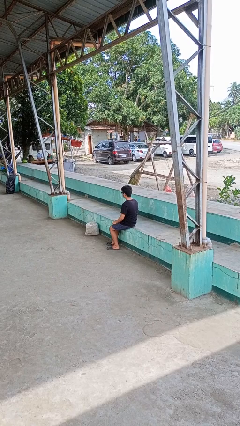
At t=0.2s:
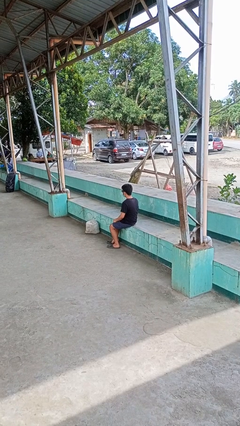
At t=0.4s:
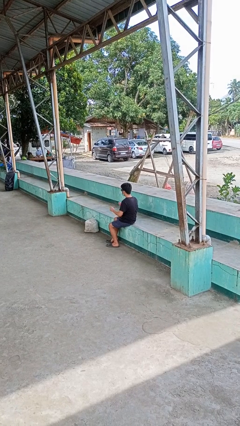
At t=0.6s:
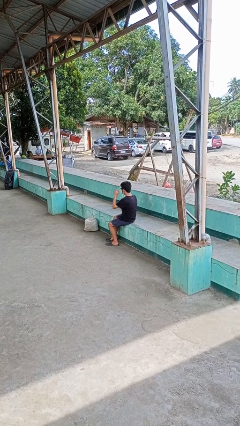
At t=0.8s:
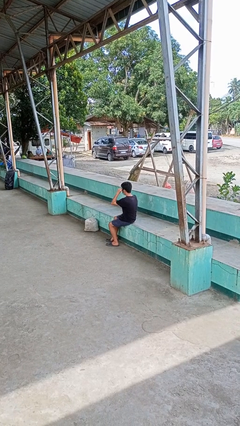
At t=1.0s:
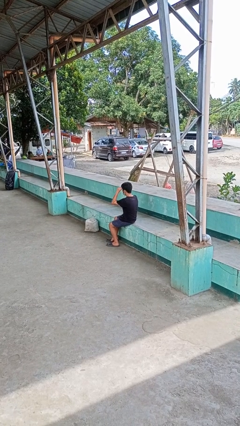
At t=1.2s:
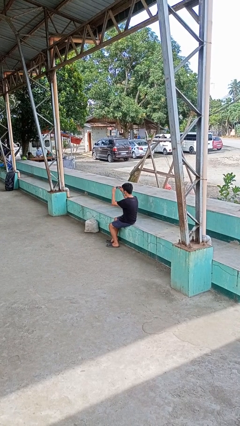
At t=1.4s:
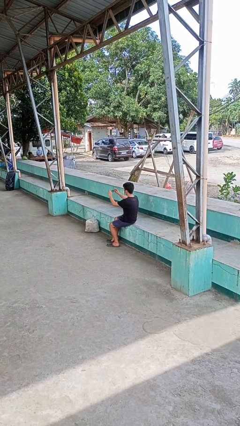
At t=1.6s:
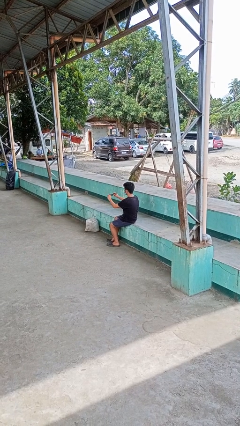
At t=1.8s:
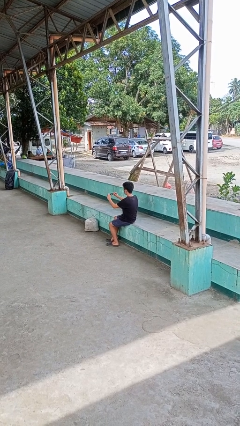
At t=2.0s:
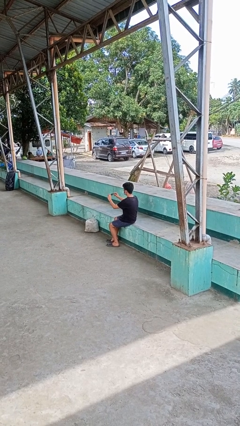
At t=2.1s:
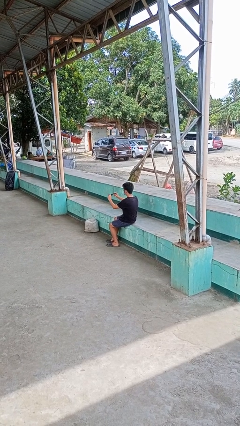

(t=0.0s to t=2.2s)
person takes off sunglasses

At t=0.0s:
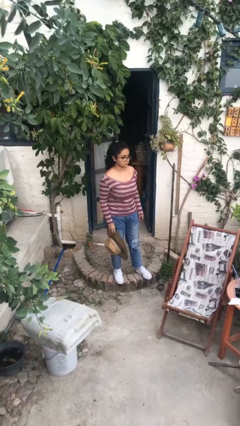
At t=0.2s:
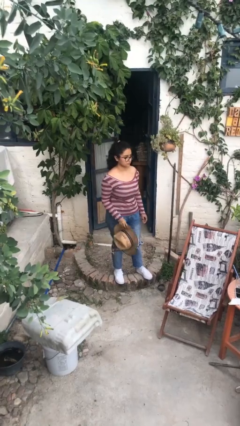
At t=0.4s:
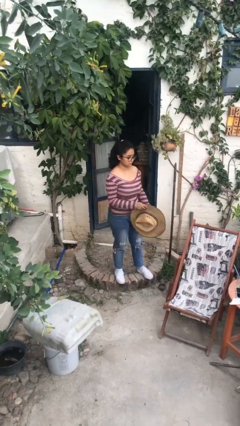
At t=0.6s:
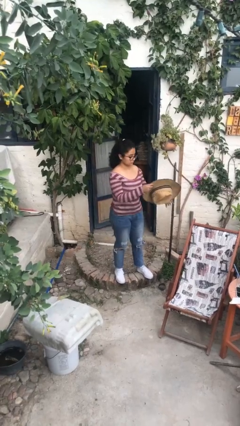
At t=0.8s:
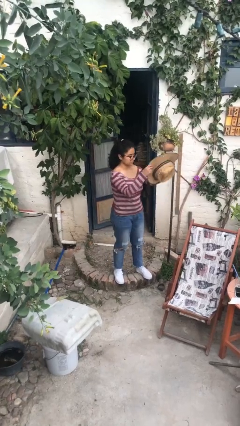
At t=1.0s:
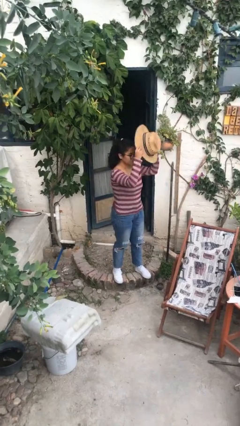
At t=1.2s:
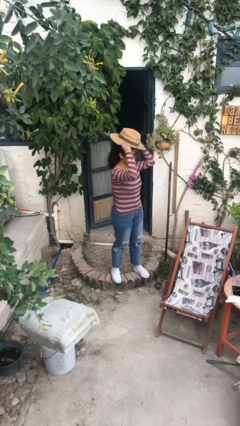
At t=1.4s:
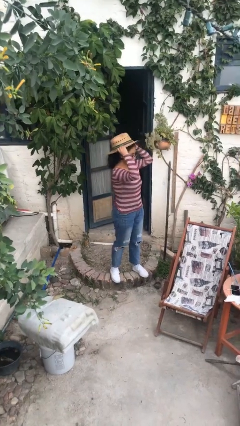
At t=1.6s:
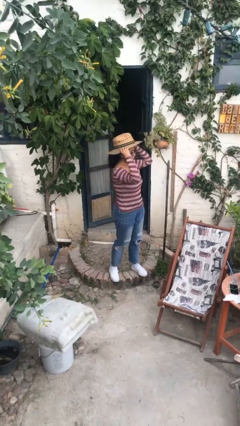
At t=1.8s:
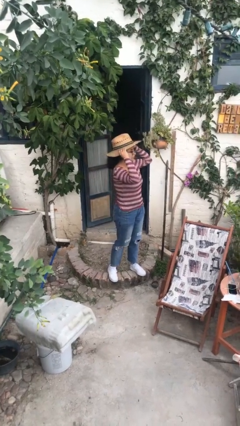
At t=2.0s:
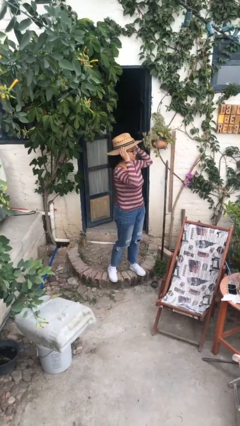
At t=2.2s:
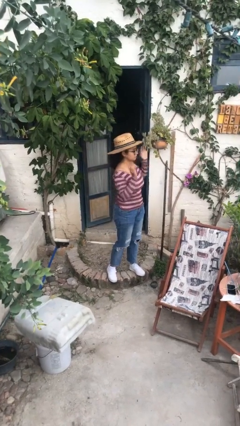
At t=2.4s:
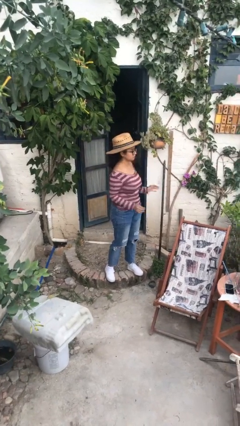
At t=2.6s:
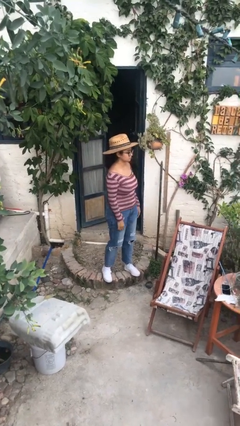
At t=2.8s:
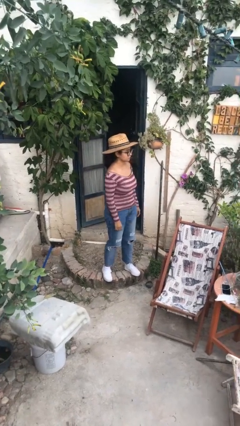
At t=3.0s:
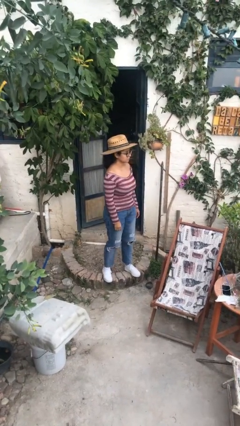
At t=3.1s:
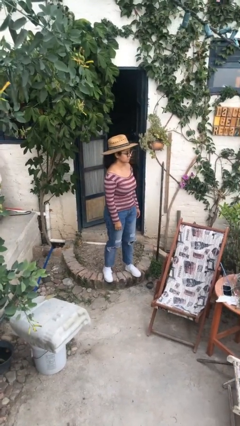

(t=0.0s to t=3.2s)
person puts on hat

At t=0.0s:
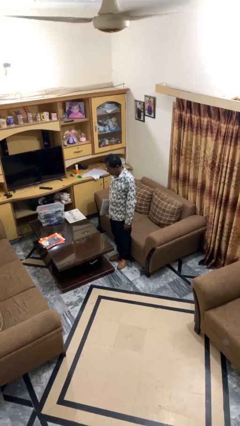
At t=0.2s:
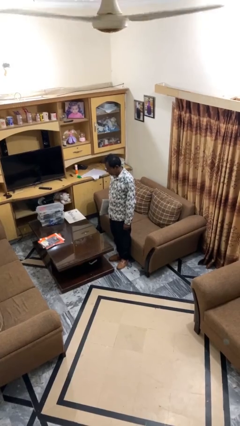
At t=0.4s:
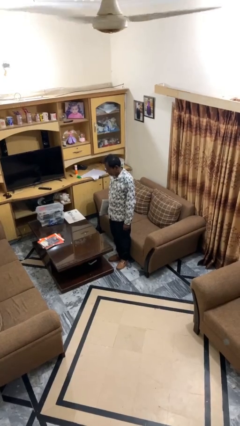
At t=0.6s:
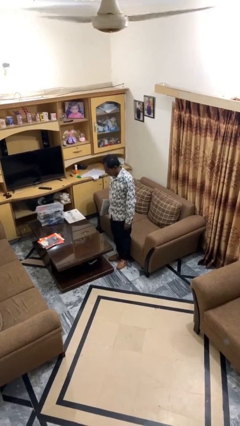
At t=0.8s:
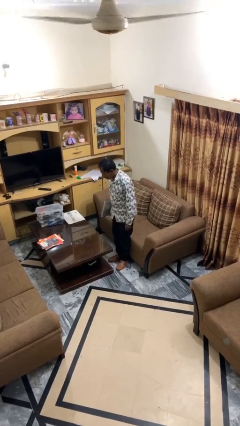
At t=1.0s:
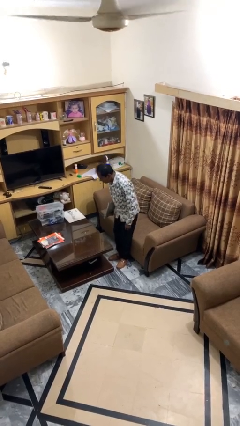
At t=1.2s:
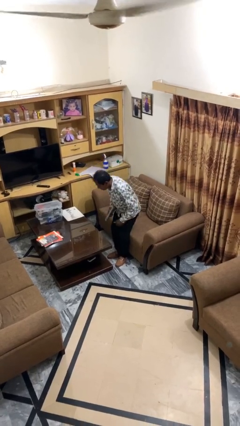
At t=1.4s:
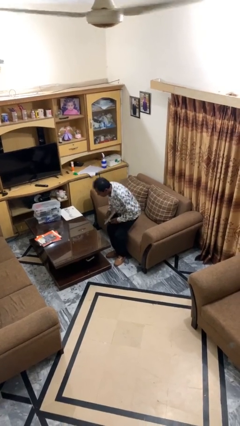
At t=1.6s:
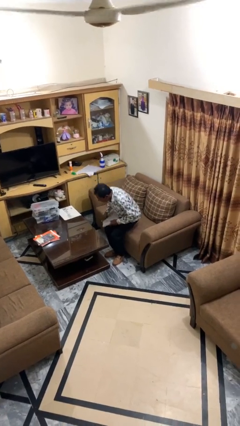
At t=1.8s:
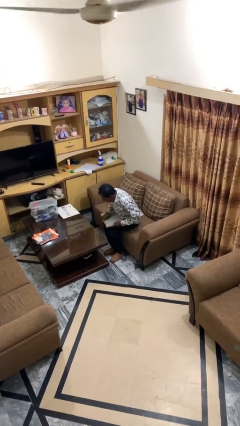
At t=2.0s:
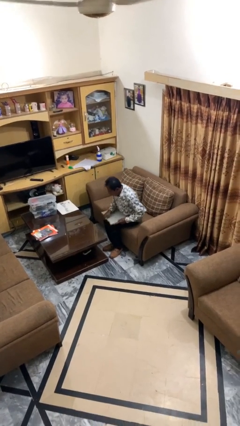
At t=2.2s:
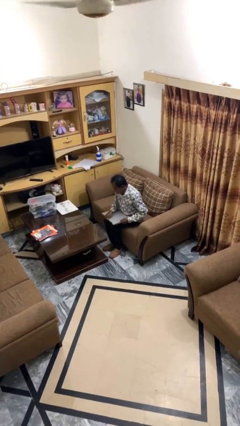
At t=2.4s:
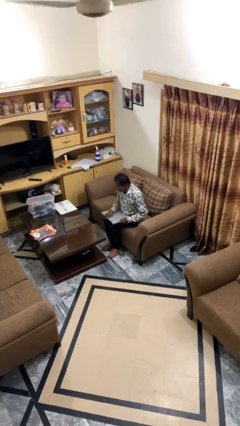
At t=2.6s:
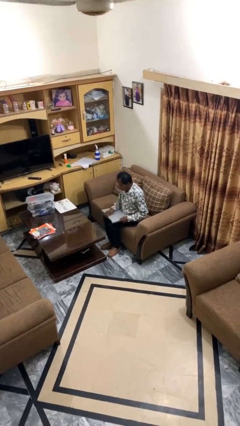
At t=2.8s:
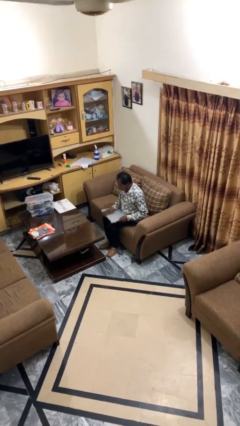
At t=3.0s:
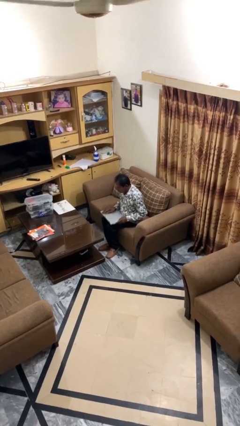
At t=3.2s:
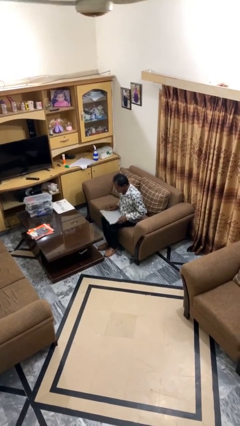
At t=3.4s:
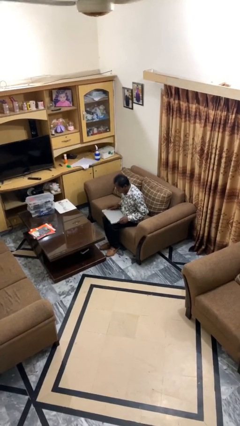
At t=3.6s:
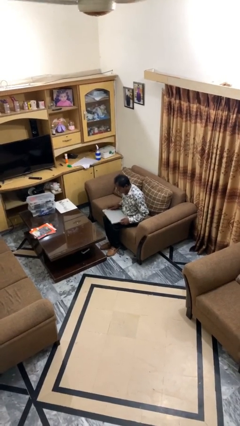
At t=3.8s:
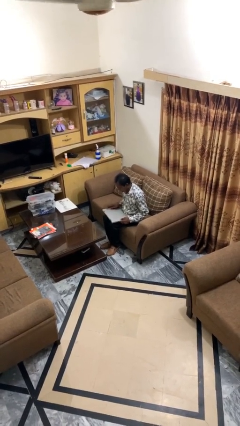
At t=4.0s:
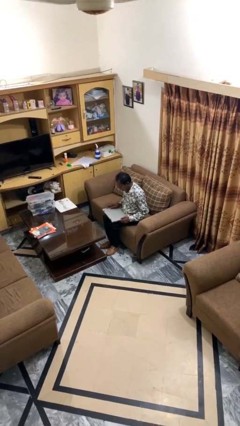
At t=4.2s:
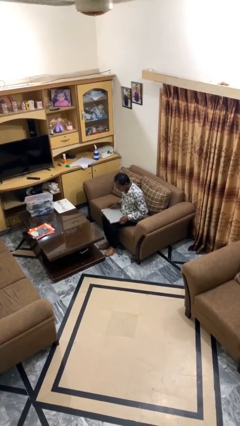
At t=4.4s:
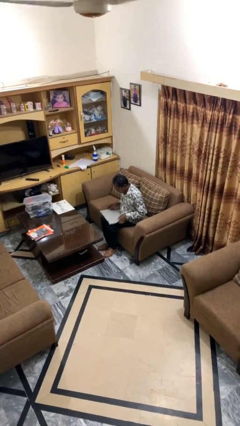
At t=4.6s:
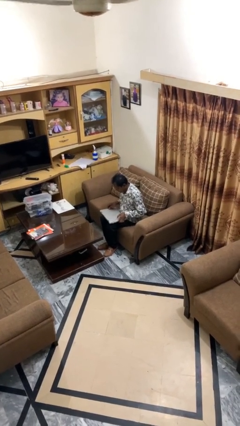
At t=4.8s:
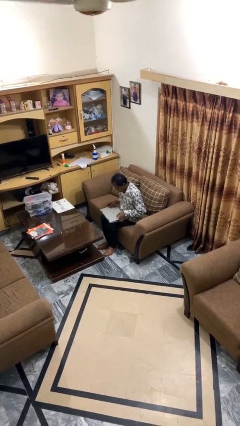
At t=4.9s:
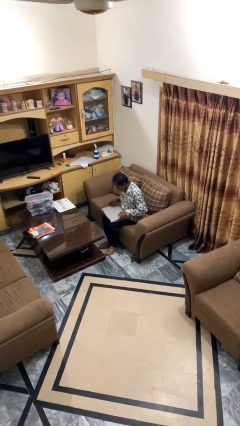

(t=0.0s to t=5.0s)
person sits down

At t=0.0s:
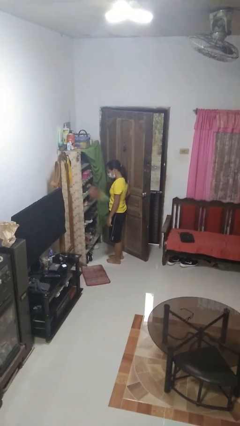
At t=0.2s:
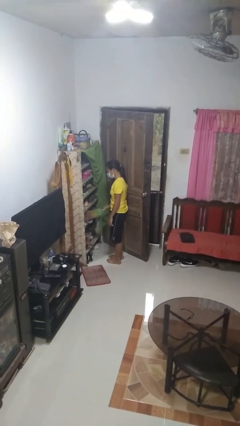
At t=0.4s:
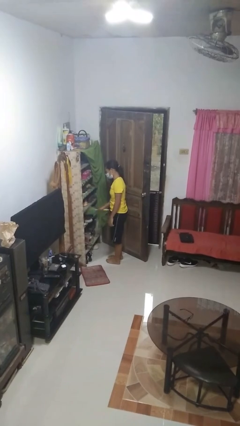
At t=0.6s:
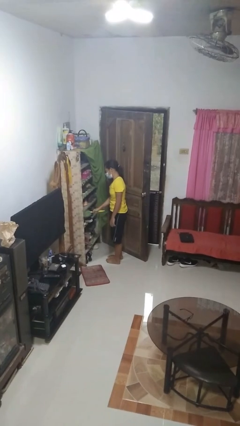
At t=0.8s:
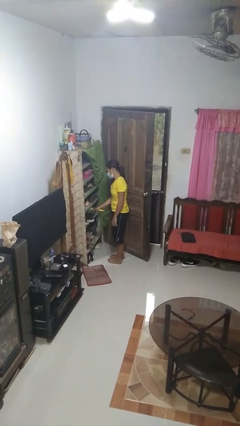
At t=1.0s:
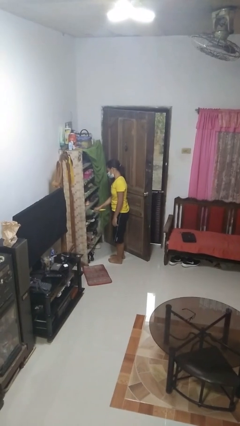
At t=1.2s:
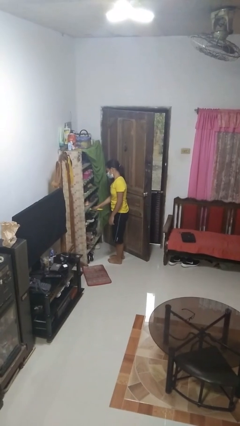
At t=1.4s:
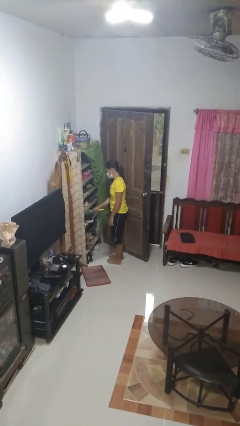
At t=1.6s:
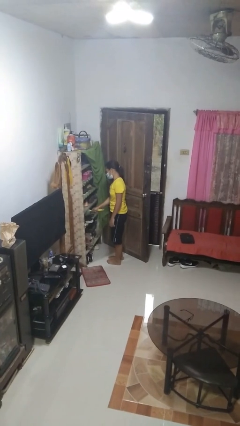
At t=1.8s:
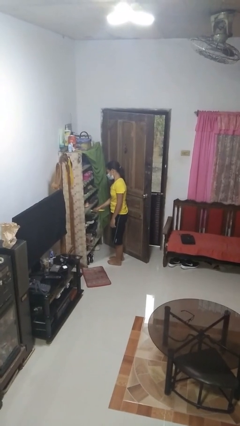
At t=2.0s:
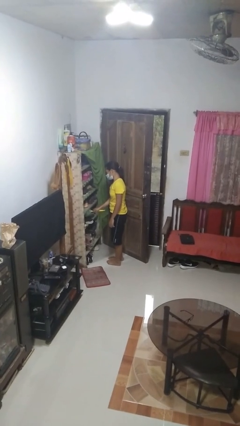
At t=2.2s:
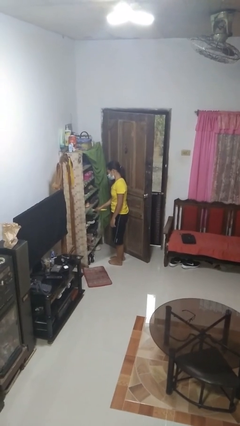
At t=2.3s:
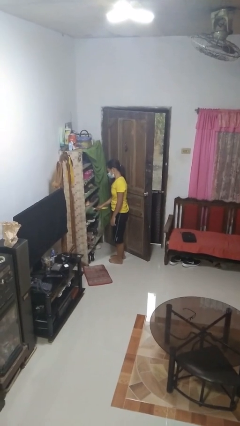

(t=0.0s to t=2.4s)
person dusts furniture

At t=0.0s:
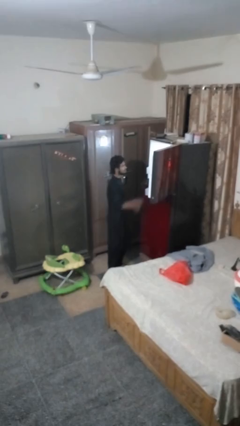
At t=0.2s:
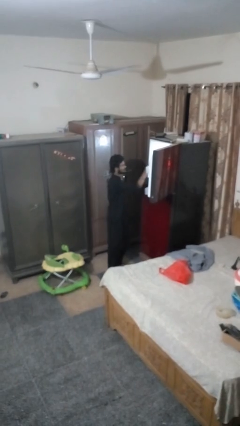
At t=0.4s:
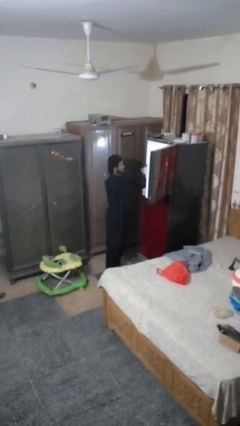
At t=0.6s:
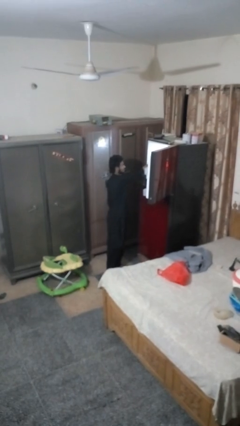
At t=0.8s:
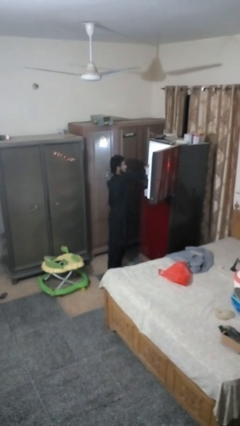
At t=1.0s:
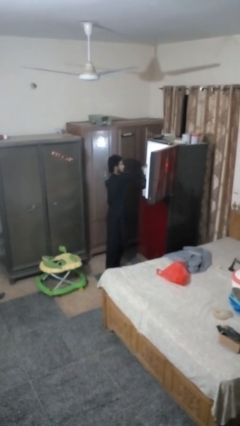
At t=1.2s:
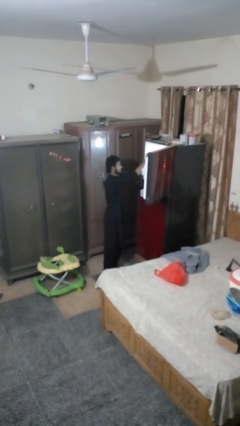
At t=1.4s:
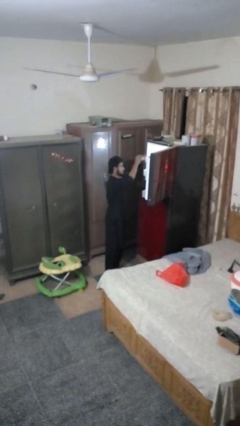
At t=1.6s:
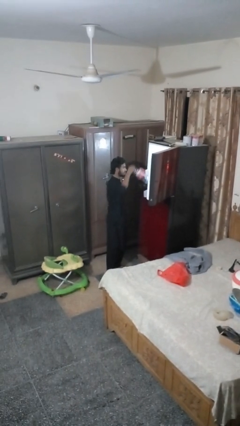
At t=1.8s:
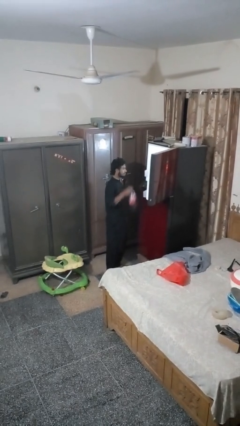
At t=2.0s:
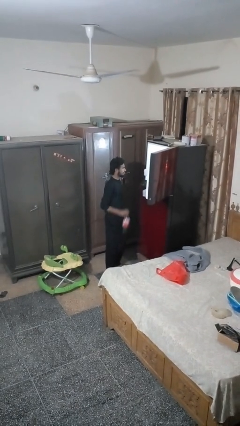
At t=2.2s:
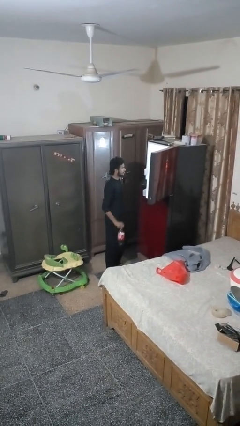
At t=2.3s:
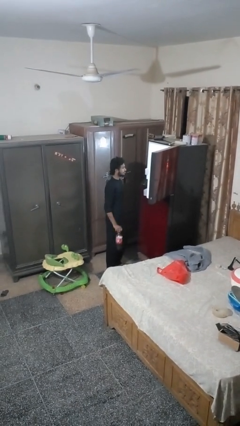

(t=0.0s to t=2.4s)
person takes object from refrigerator

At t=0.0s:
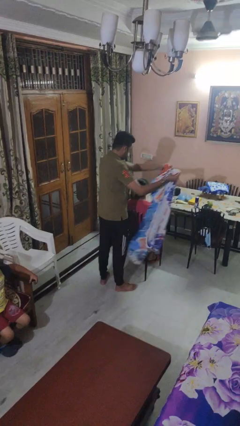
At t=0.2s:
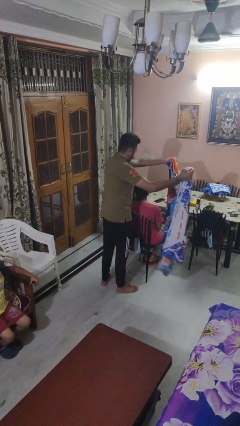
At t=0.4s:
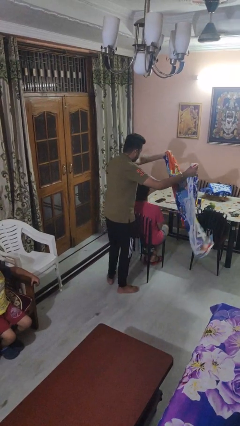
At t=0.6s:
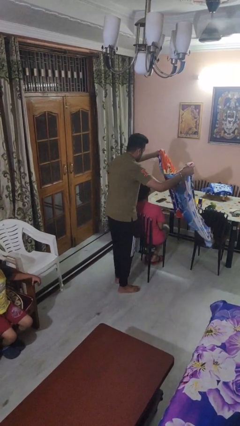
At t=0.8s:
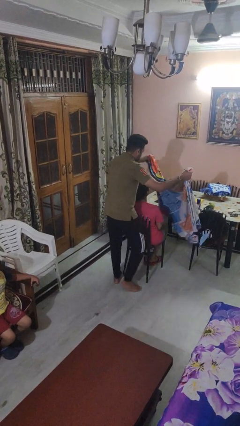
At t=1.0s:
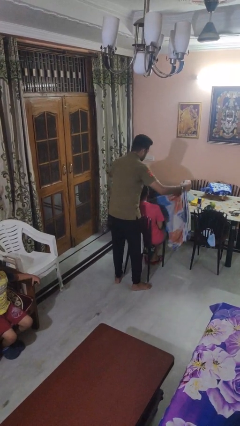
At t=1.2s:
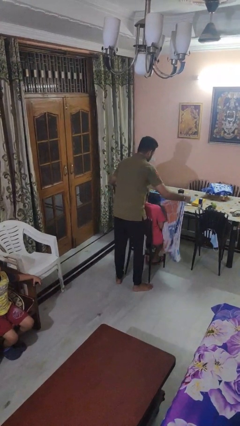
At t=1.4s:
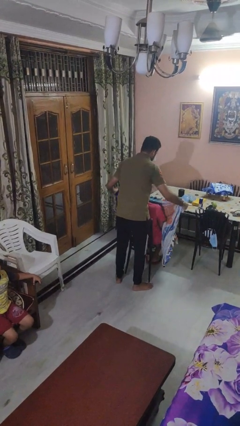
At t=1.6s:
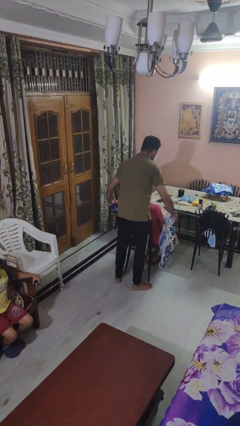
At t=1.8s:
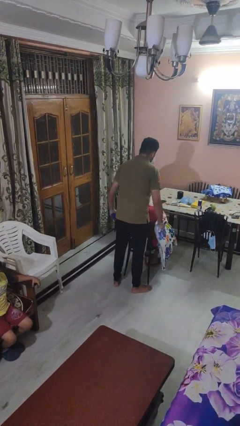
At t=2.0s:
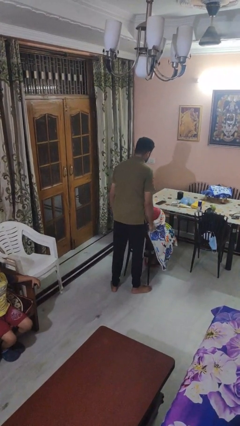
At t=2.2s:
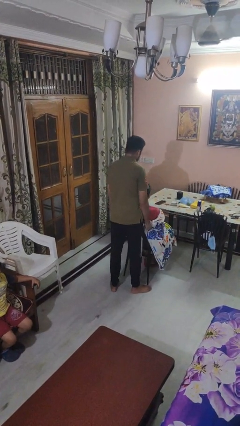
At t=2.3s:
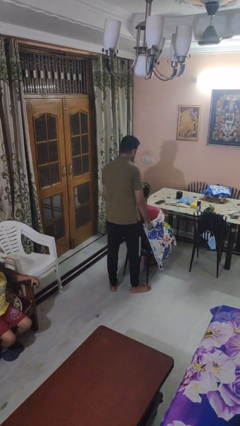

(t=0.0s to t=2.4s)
person covers friend with blanket
